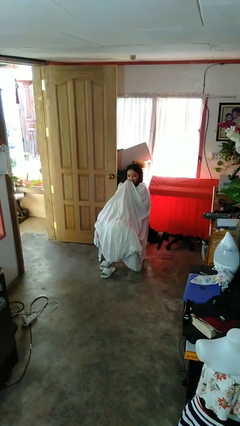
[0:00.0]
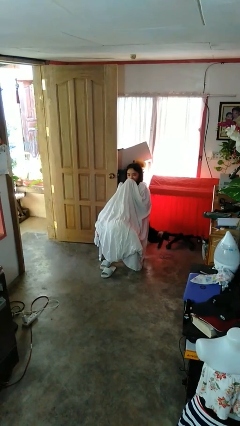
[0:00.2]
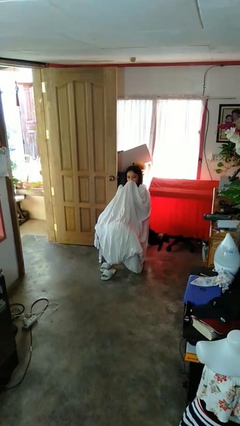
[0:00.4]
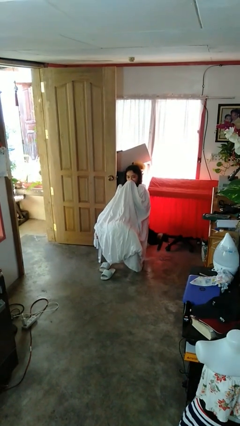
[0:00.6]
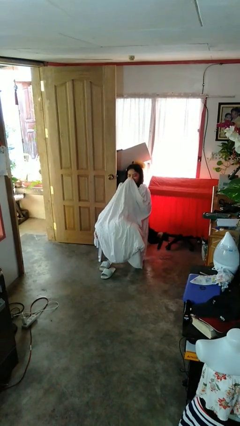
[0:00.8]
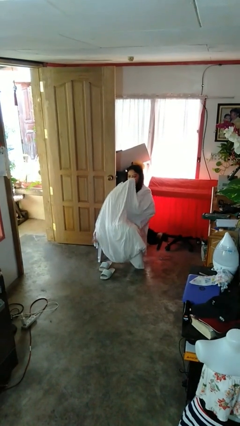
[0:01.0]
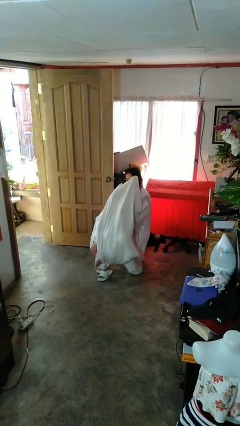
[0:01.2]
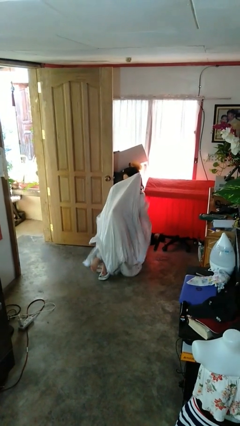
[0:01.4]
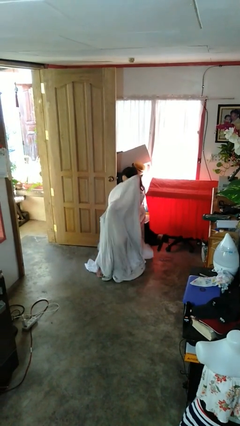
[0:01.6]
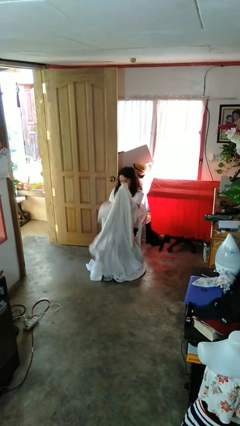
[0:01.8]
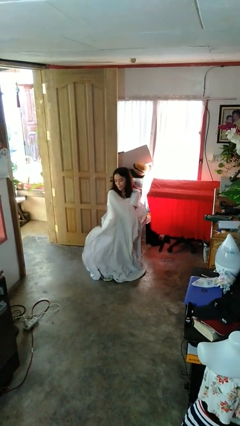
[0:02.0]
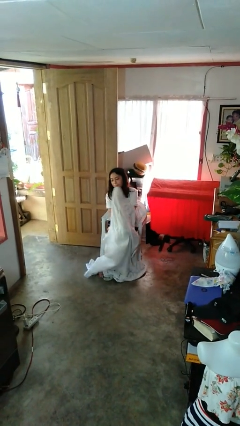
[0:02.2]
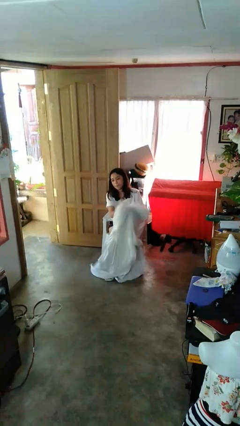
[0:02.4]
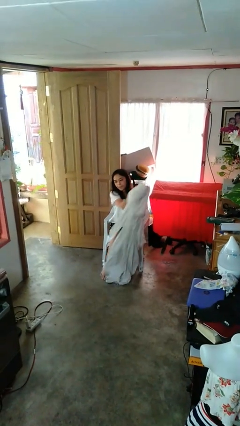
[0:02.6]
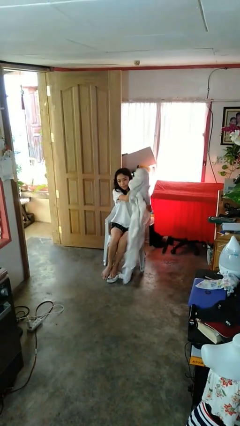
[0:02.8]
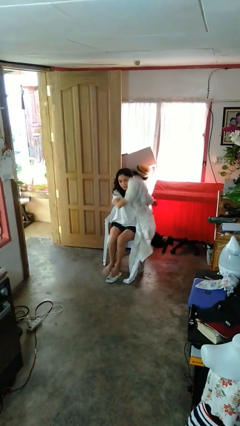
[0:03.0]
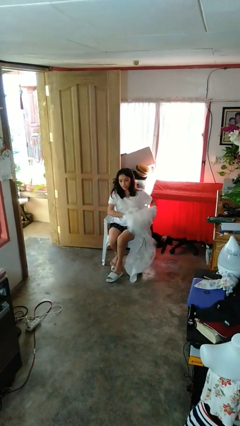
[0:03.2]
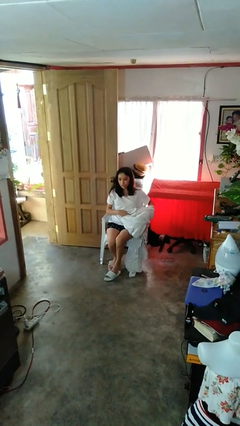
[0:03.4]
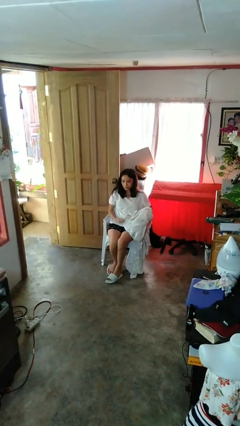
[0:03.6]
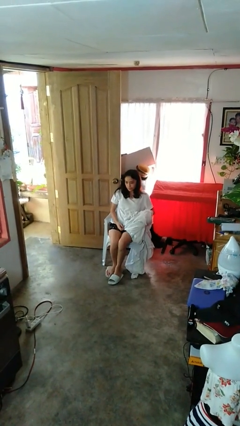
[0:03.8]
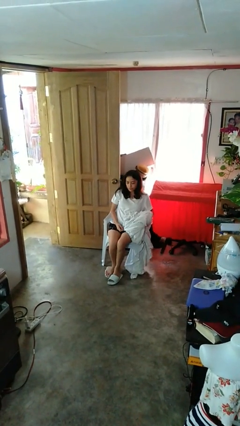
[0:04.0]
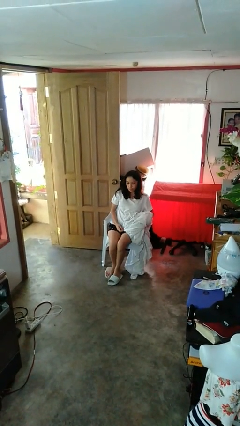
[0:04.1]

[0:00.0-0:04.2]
person uncovers with blanket

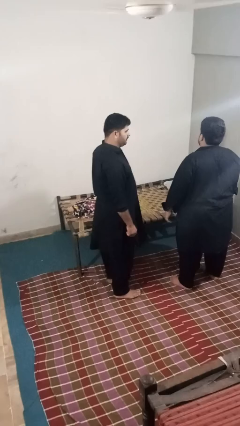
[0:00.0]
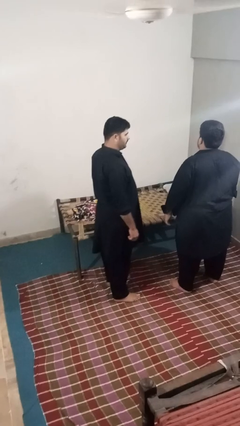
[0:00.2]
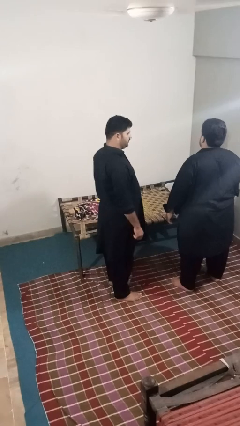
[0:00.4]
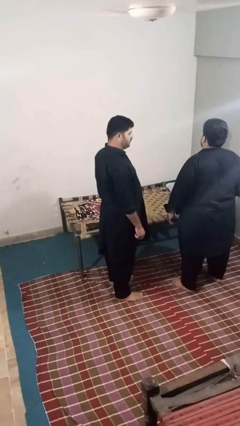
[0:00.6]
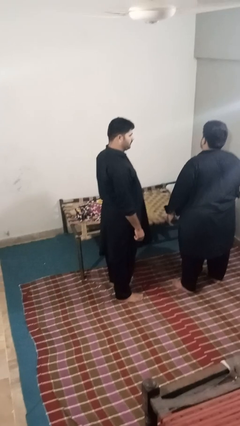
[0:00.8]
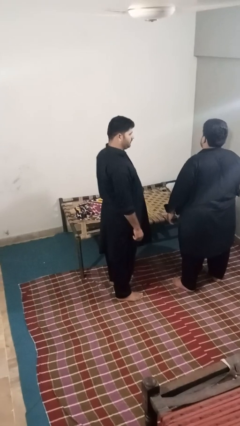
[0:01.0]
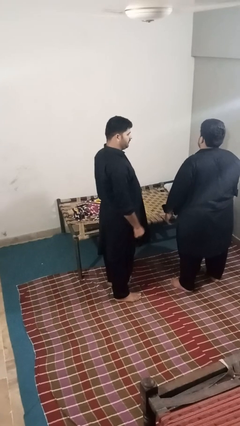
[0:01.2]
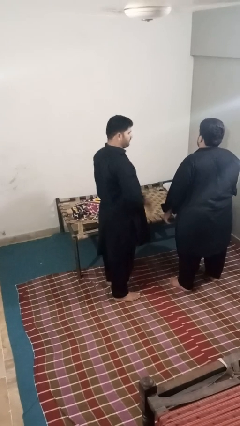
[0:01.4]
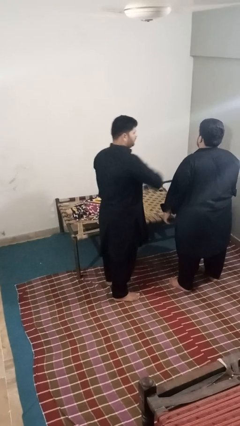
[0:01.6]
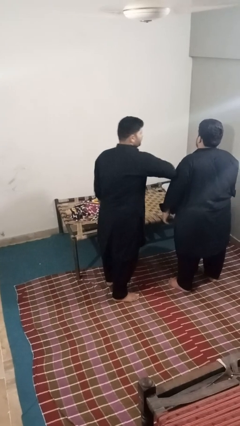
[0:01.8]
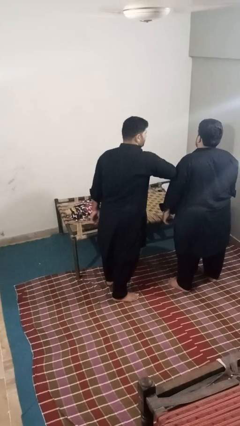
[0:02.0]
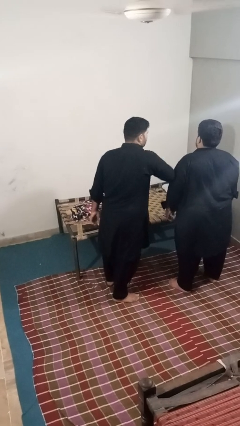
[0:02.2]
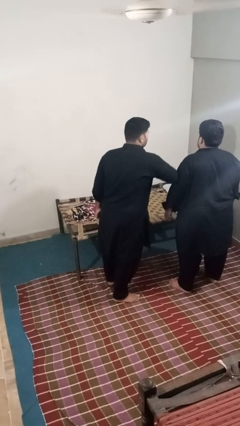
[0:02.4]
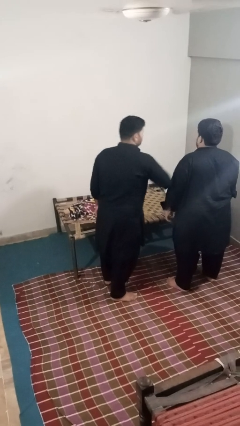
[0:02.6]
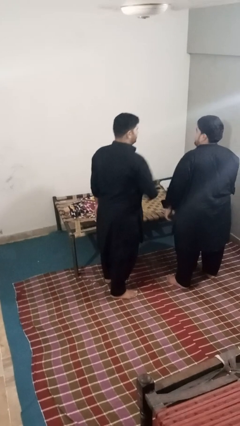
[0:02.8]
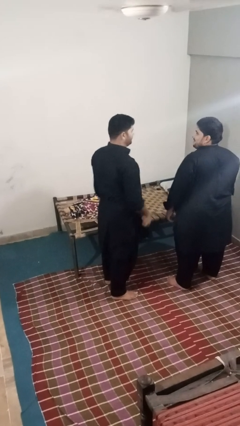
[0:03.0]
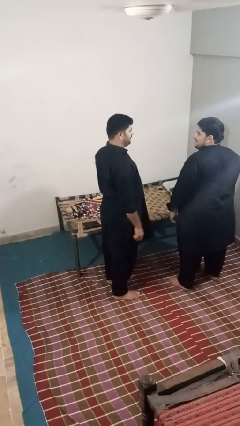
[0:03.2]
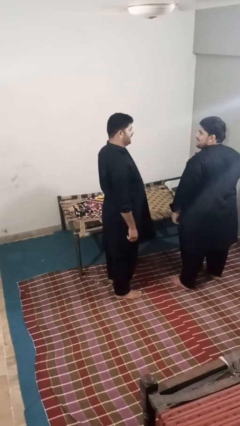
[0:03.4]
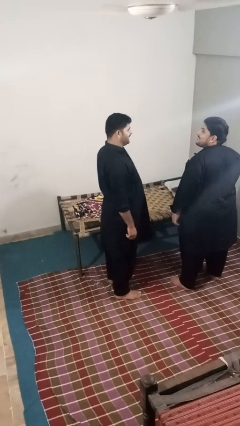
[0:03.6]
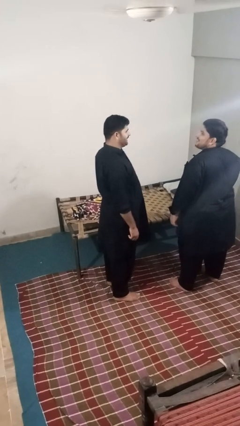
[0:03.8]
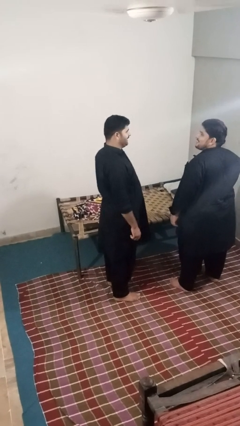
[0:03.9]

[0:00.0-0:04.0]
person nudges person with elbow

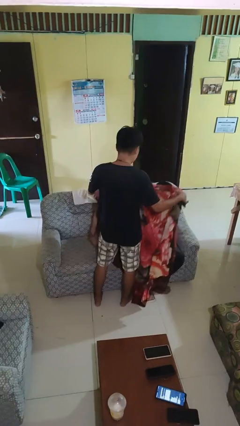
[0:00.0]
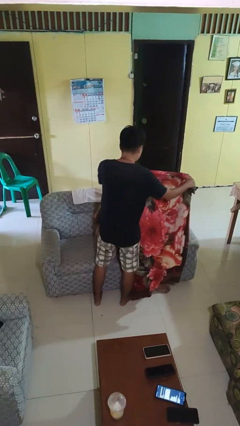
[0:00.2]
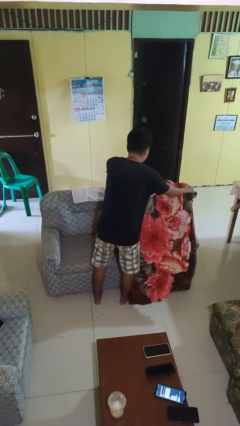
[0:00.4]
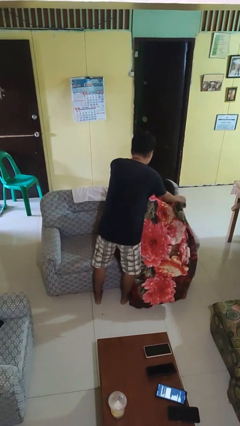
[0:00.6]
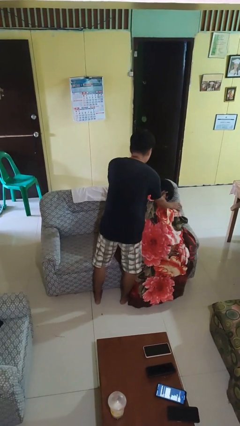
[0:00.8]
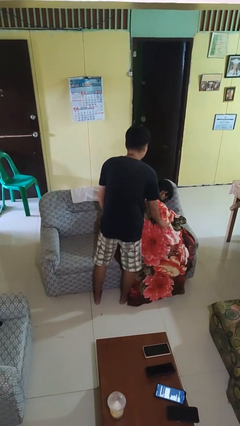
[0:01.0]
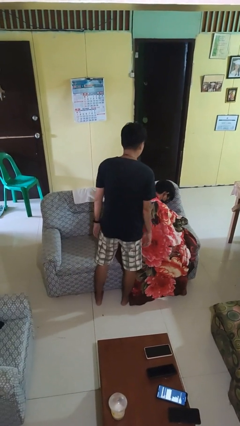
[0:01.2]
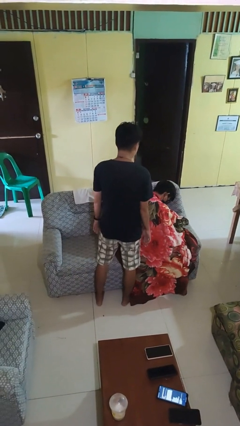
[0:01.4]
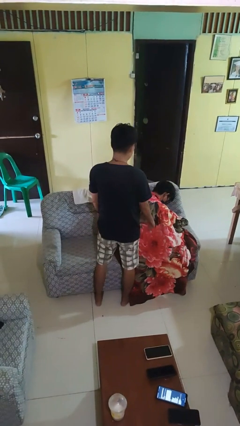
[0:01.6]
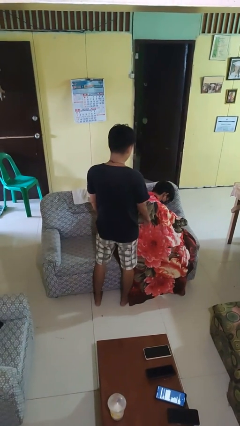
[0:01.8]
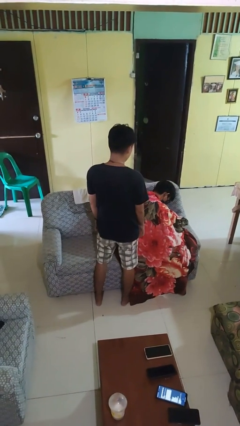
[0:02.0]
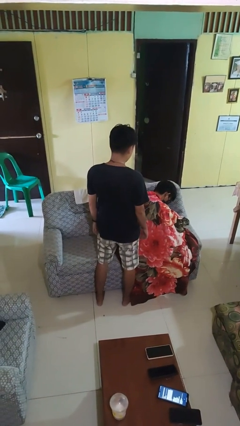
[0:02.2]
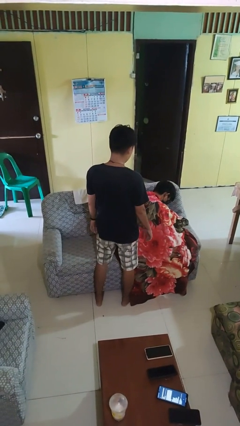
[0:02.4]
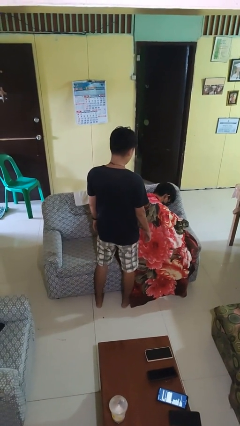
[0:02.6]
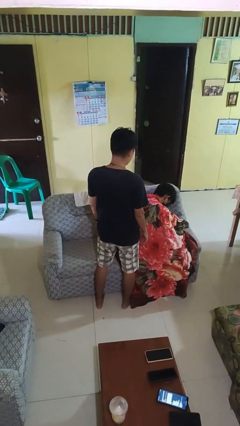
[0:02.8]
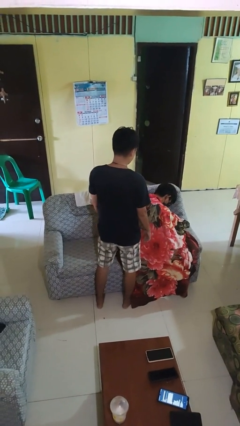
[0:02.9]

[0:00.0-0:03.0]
person covers friend with blanket

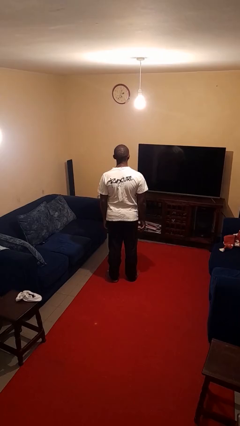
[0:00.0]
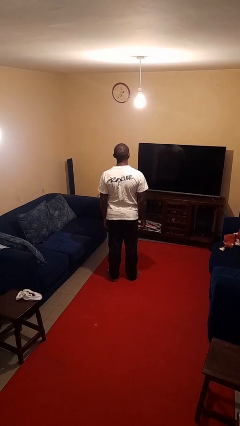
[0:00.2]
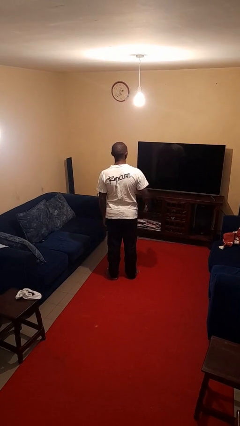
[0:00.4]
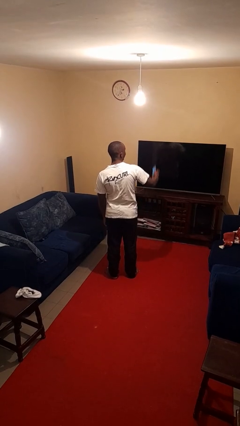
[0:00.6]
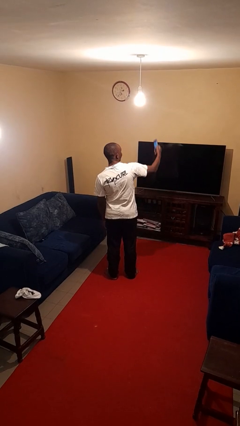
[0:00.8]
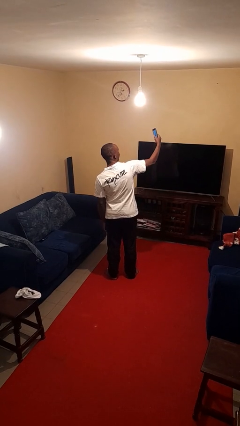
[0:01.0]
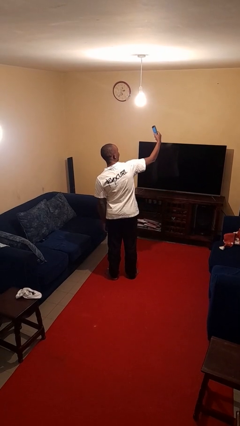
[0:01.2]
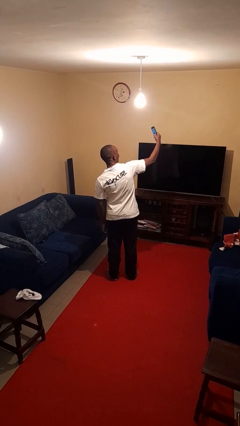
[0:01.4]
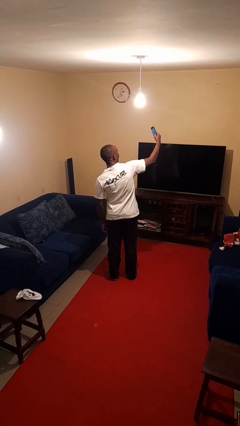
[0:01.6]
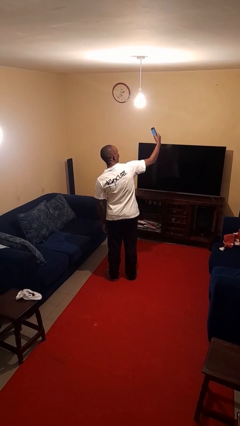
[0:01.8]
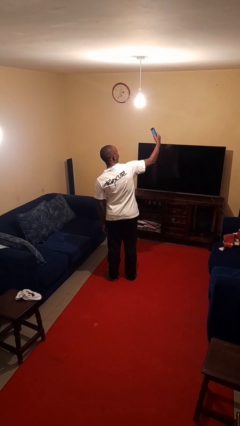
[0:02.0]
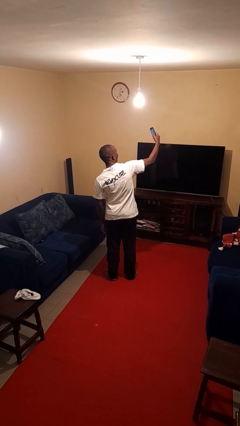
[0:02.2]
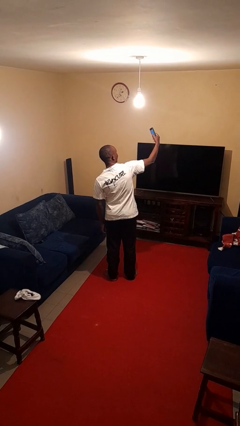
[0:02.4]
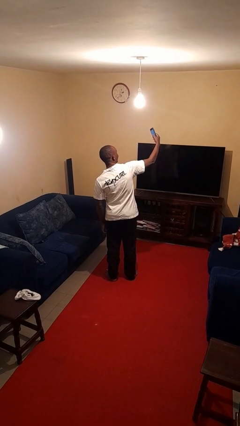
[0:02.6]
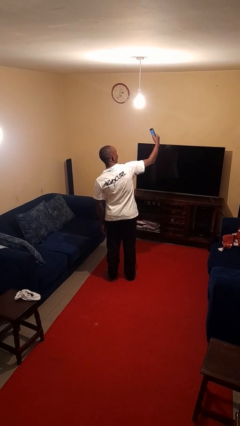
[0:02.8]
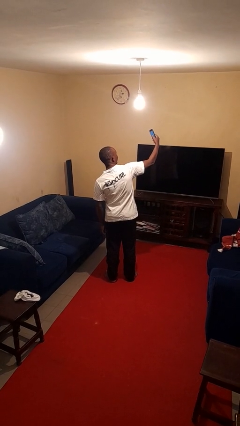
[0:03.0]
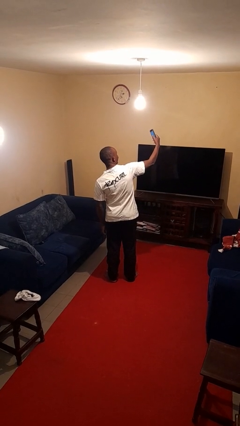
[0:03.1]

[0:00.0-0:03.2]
person takes selfie

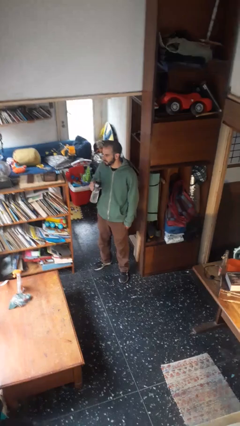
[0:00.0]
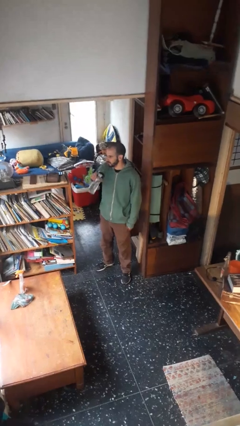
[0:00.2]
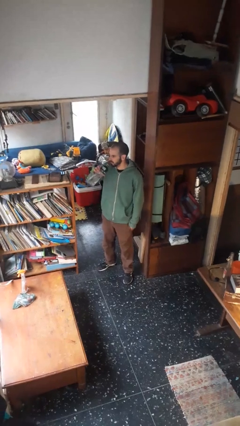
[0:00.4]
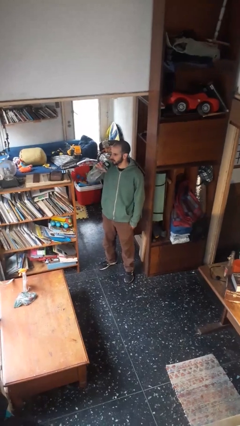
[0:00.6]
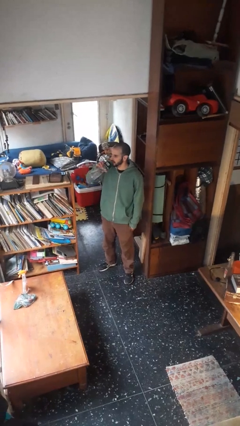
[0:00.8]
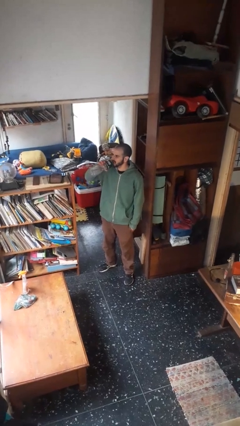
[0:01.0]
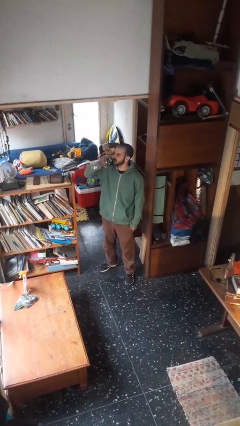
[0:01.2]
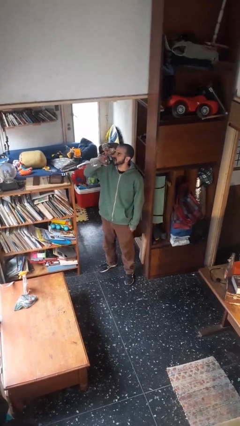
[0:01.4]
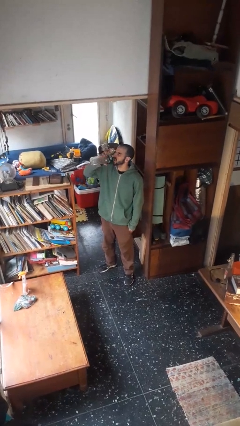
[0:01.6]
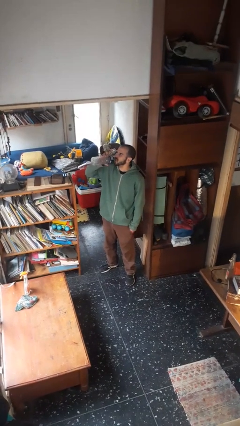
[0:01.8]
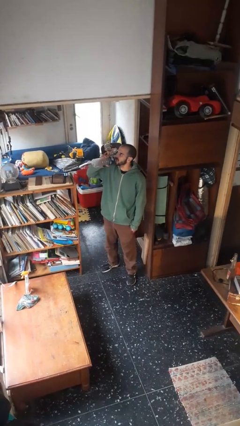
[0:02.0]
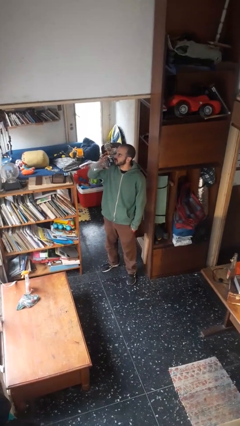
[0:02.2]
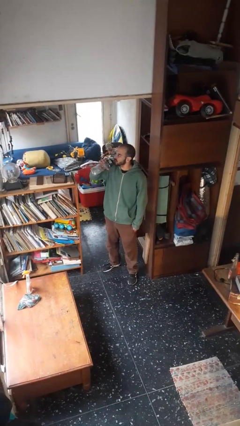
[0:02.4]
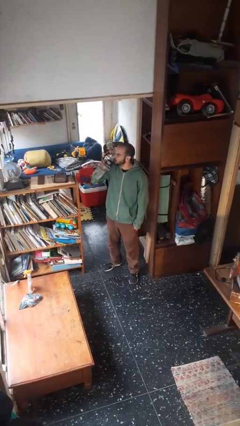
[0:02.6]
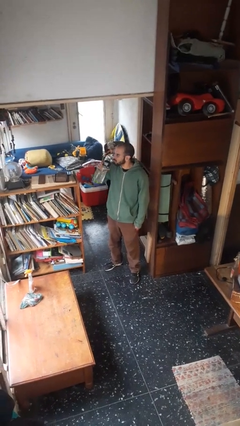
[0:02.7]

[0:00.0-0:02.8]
person drinks from bottle

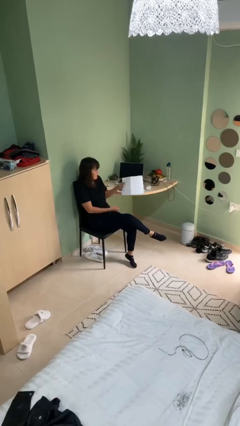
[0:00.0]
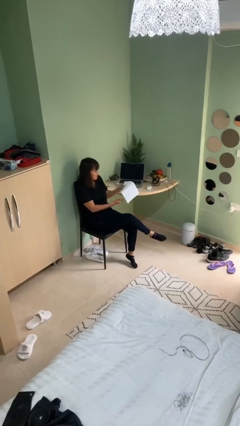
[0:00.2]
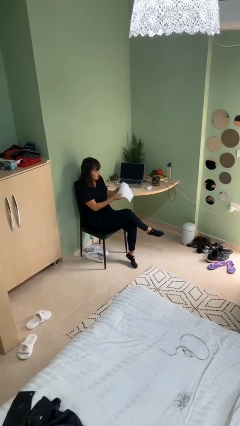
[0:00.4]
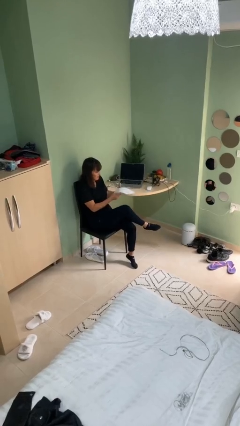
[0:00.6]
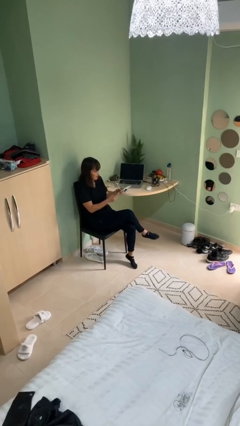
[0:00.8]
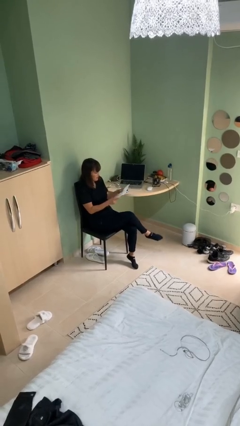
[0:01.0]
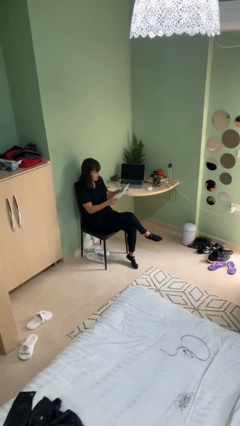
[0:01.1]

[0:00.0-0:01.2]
person picks up object from table
